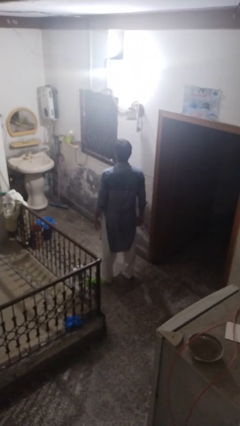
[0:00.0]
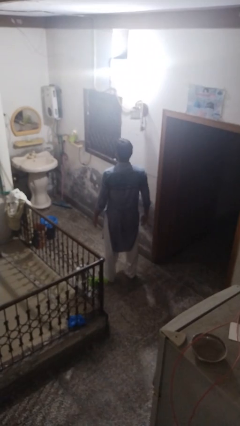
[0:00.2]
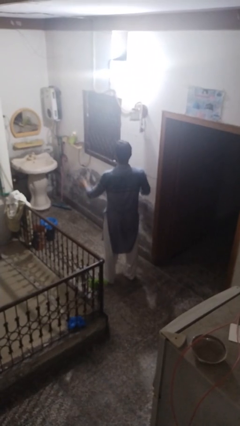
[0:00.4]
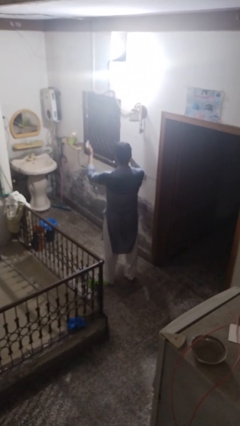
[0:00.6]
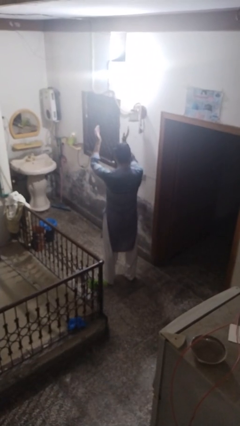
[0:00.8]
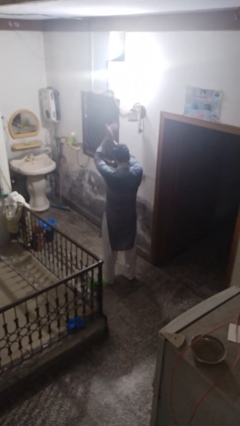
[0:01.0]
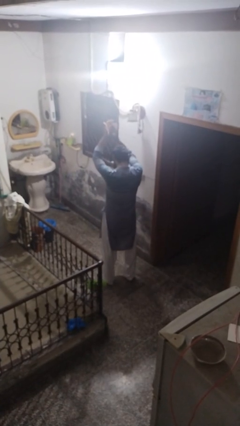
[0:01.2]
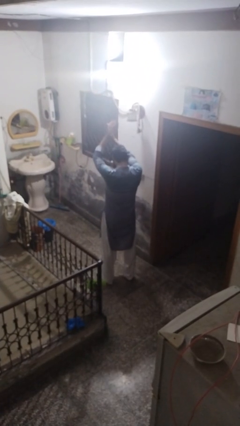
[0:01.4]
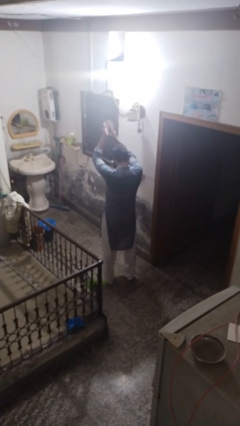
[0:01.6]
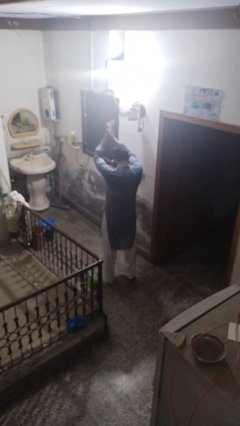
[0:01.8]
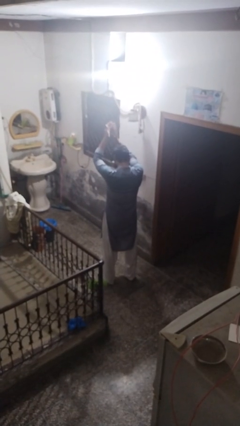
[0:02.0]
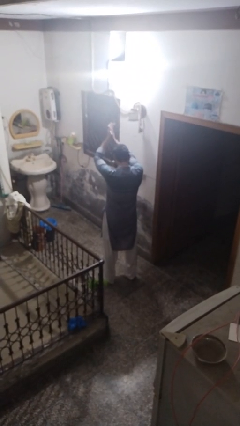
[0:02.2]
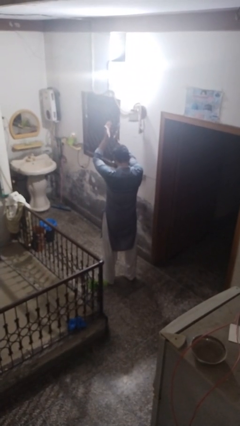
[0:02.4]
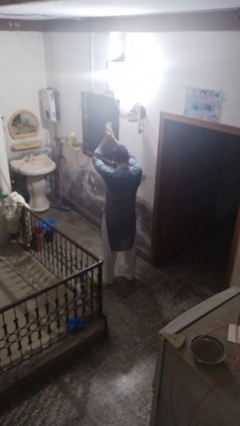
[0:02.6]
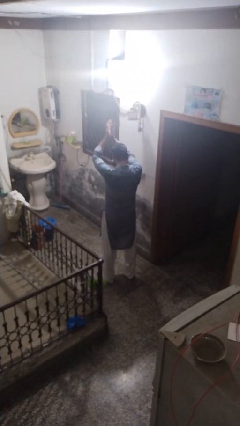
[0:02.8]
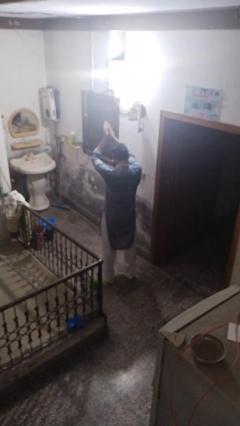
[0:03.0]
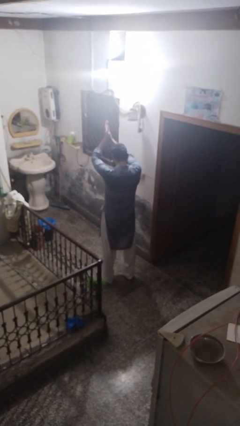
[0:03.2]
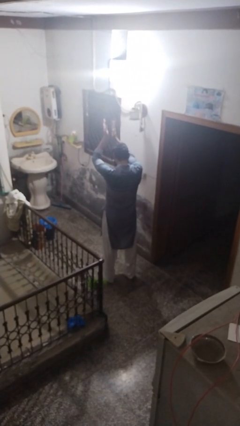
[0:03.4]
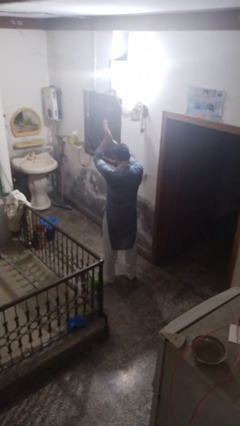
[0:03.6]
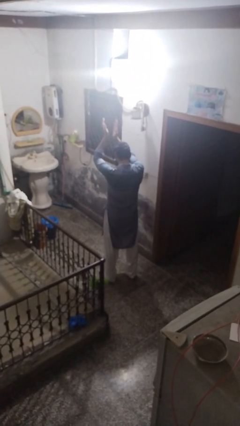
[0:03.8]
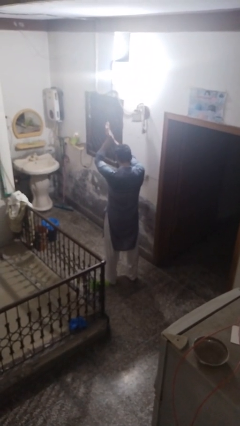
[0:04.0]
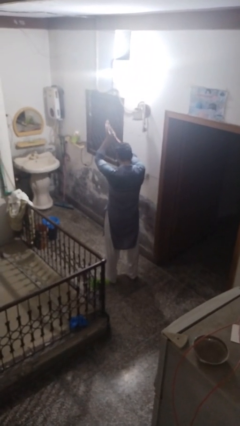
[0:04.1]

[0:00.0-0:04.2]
person claps hands

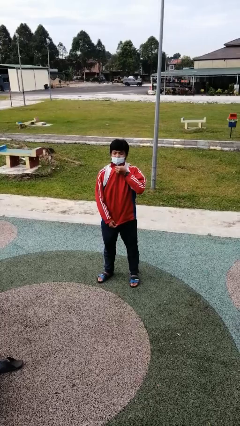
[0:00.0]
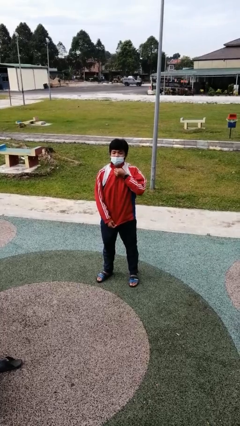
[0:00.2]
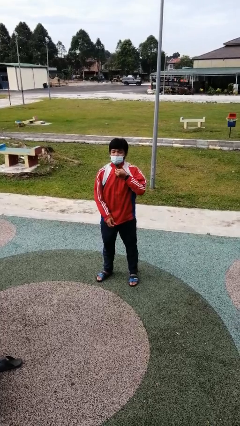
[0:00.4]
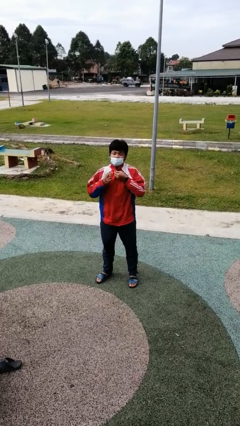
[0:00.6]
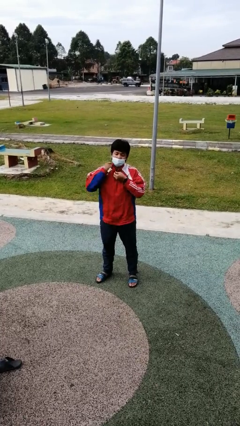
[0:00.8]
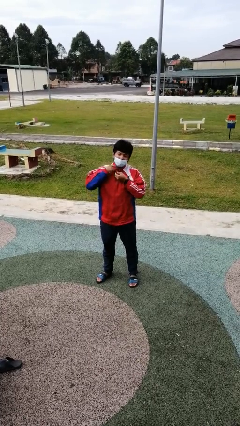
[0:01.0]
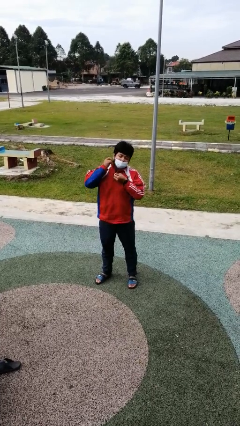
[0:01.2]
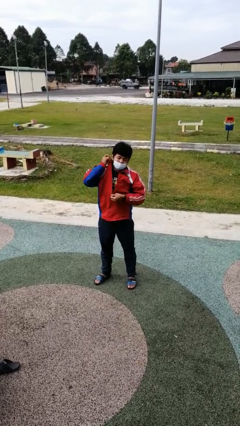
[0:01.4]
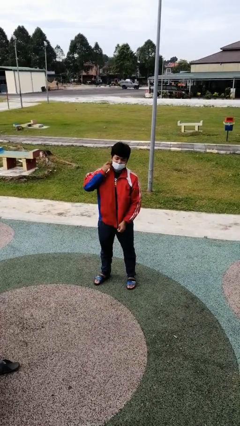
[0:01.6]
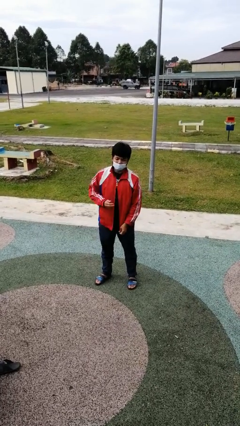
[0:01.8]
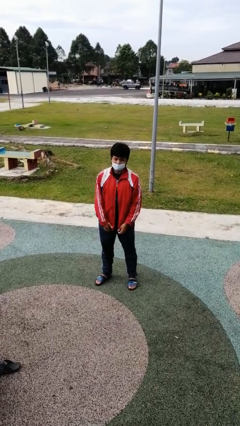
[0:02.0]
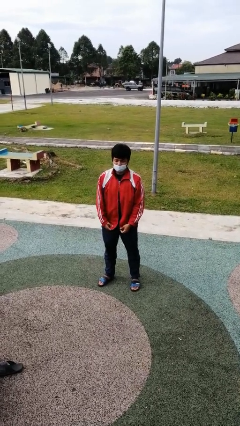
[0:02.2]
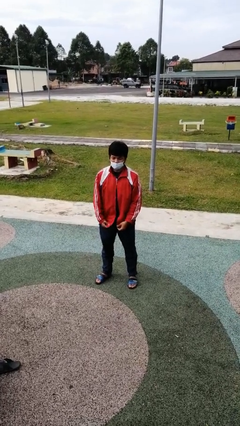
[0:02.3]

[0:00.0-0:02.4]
person unzips jacket

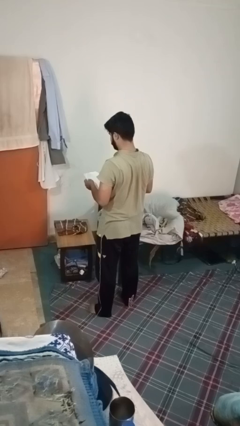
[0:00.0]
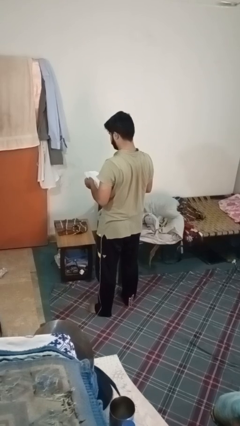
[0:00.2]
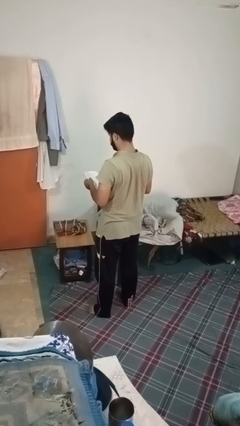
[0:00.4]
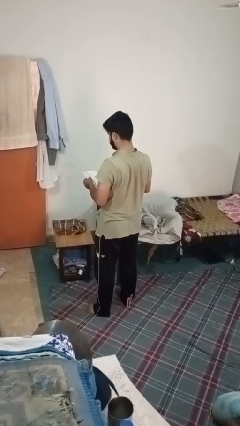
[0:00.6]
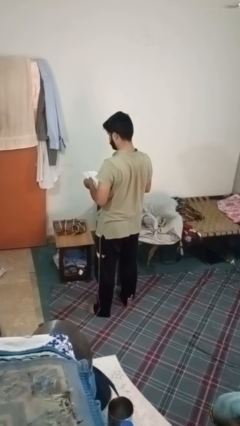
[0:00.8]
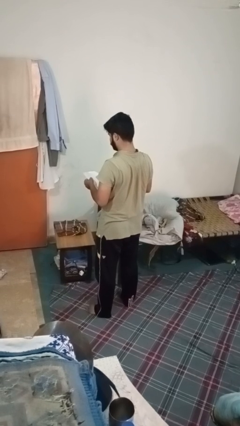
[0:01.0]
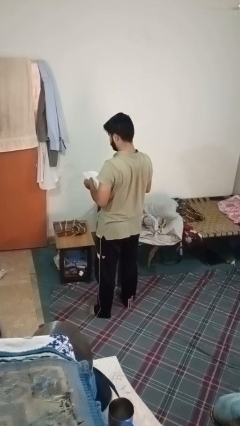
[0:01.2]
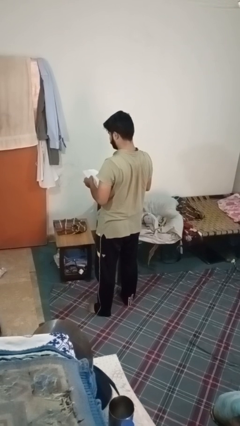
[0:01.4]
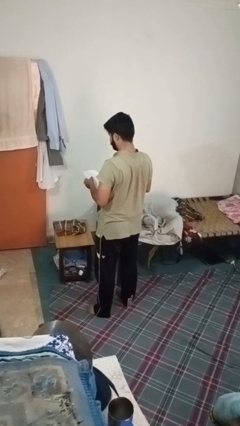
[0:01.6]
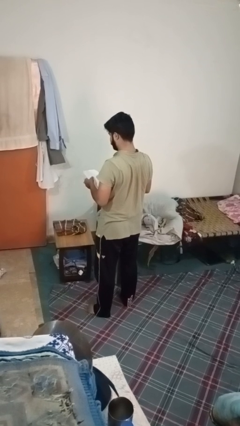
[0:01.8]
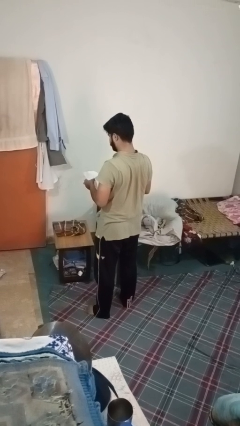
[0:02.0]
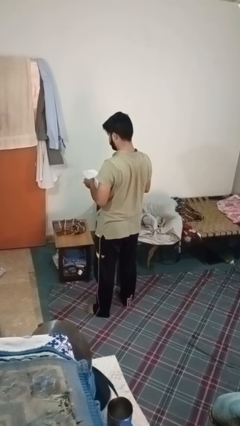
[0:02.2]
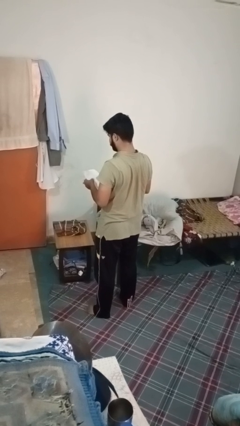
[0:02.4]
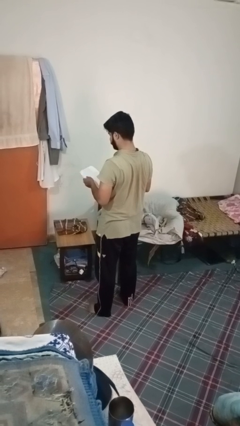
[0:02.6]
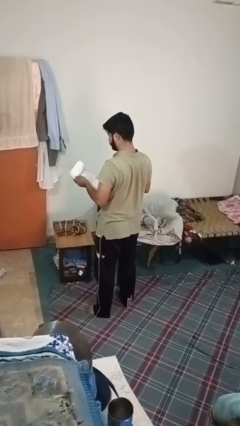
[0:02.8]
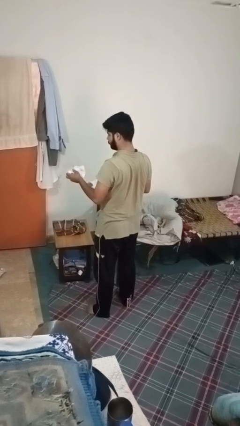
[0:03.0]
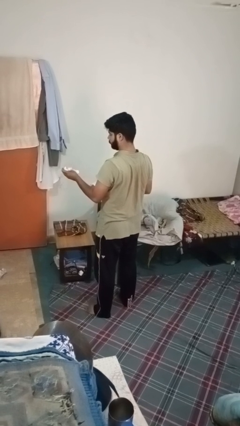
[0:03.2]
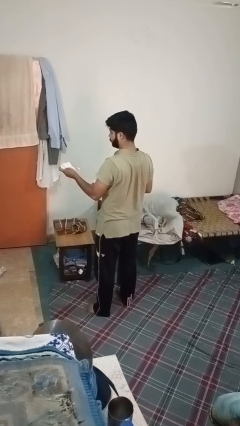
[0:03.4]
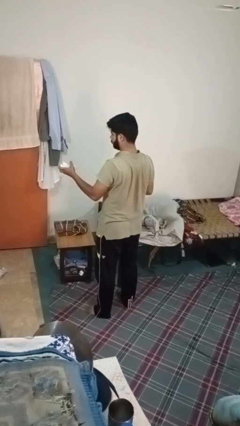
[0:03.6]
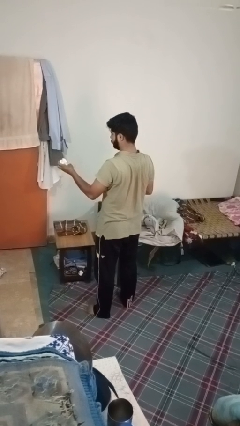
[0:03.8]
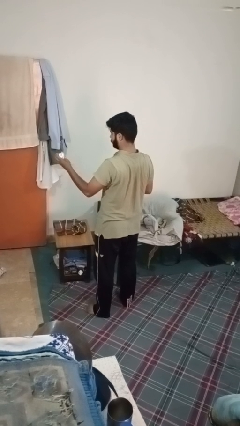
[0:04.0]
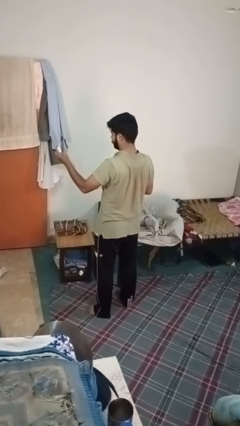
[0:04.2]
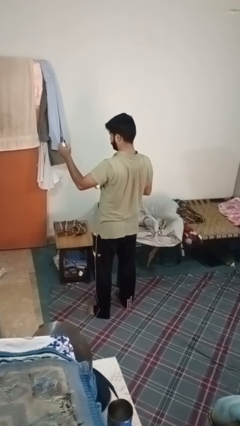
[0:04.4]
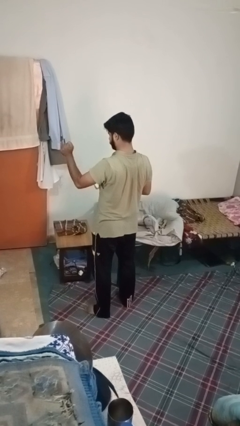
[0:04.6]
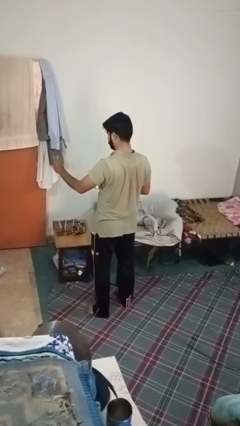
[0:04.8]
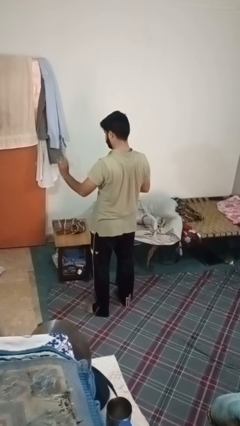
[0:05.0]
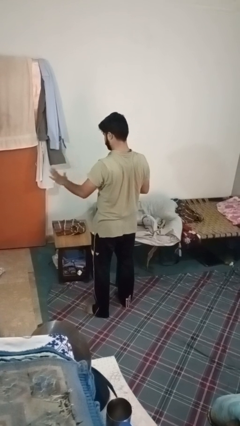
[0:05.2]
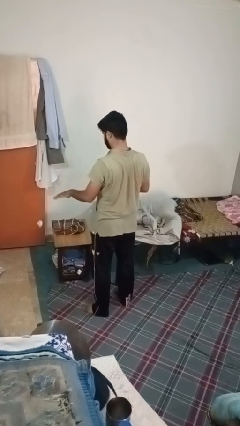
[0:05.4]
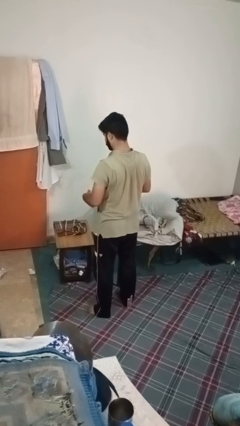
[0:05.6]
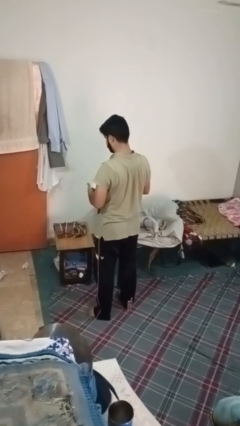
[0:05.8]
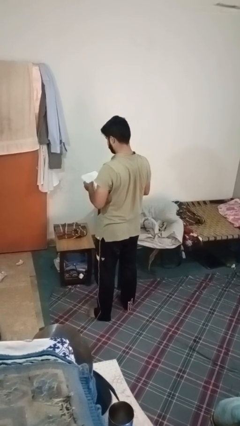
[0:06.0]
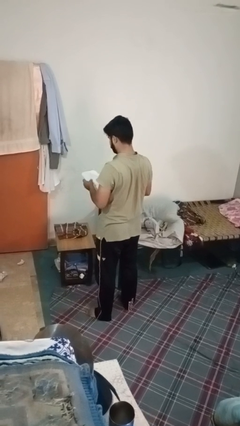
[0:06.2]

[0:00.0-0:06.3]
person crumples paper

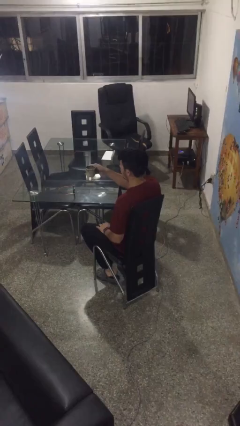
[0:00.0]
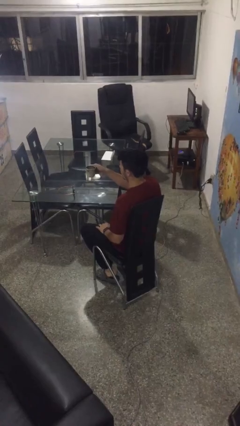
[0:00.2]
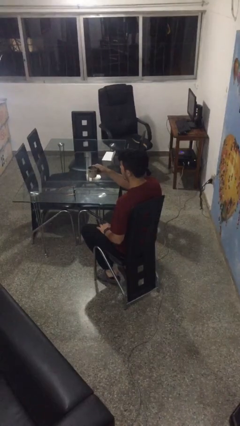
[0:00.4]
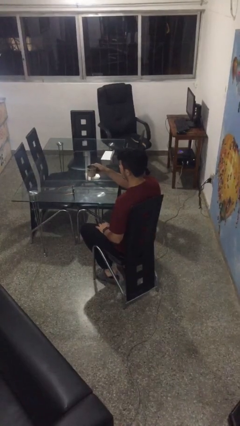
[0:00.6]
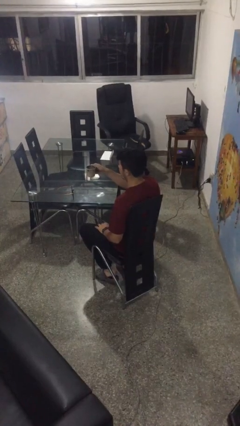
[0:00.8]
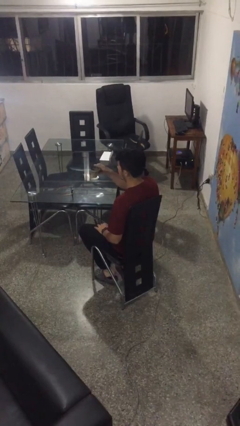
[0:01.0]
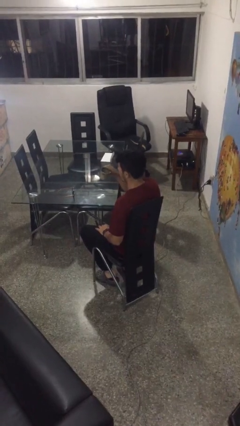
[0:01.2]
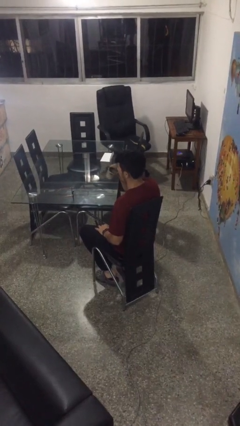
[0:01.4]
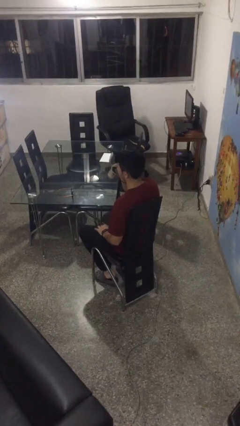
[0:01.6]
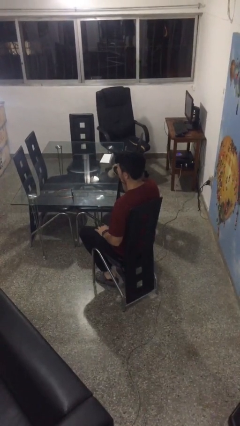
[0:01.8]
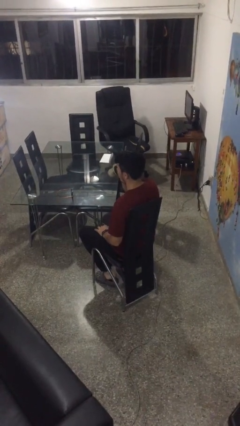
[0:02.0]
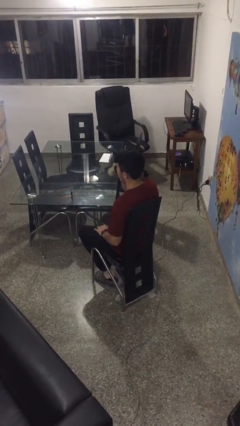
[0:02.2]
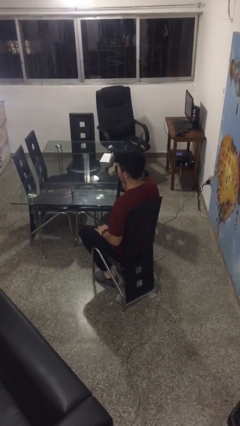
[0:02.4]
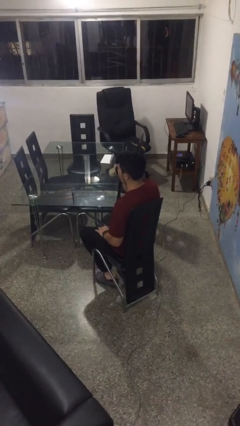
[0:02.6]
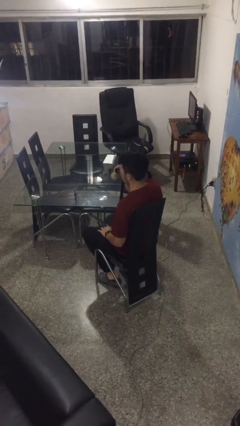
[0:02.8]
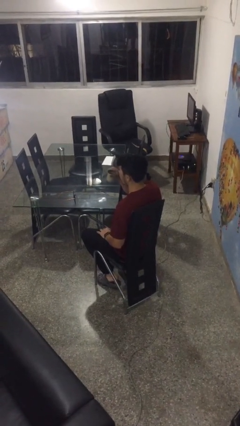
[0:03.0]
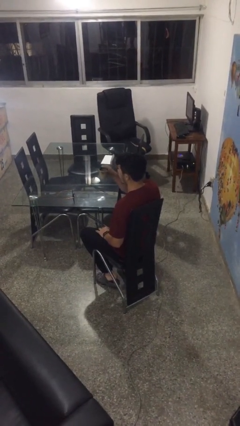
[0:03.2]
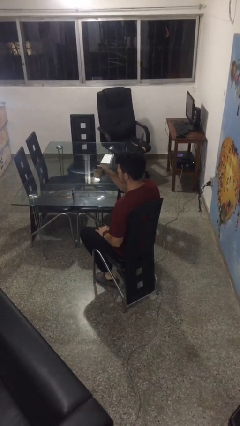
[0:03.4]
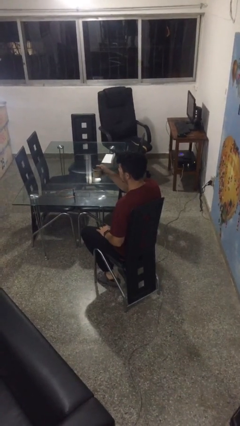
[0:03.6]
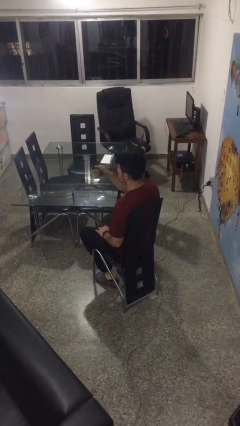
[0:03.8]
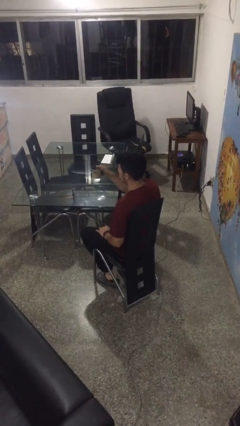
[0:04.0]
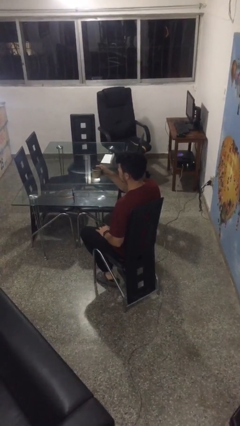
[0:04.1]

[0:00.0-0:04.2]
person drinks from mug

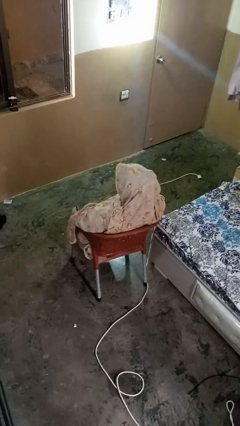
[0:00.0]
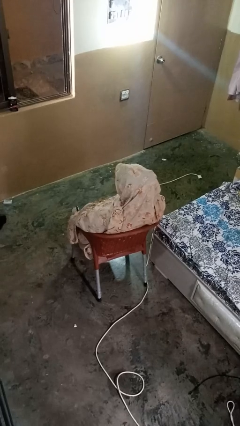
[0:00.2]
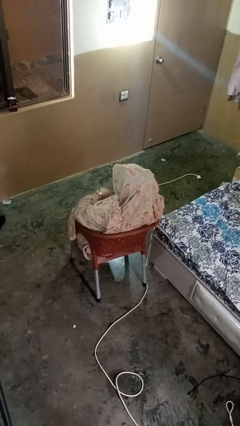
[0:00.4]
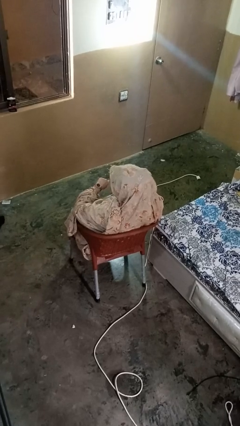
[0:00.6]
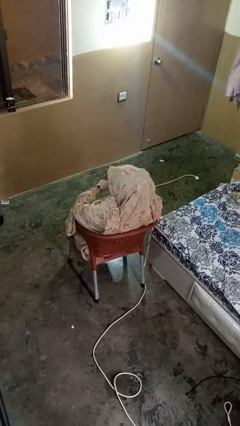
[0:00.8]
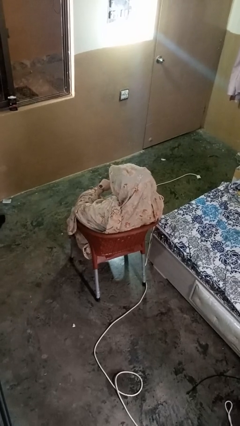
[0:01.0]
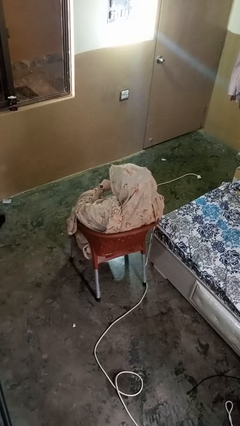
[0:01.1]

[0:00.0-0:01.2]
person looks at wristwatch
